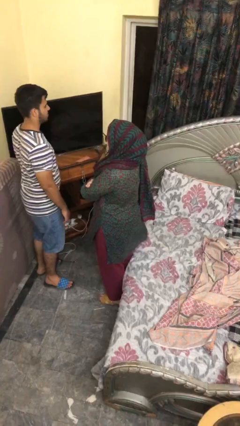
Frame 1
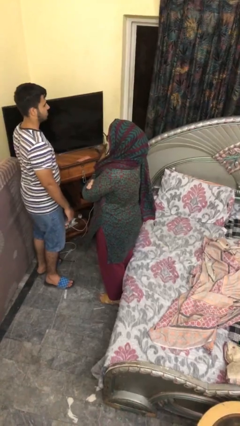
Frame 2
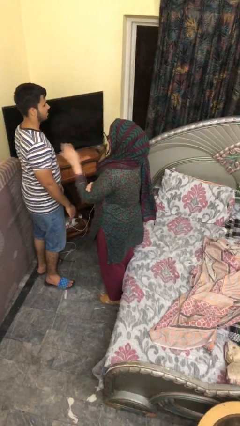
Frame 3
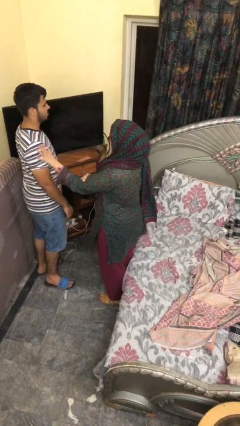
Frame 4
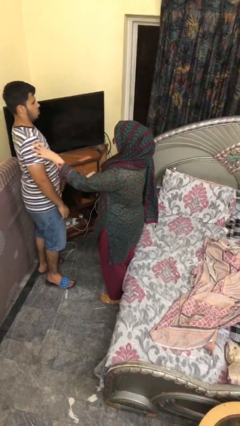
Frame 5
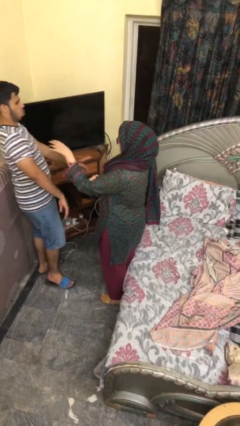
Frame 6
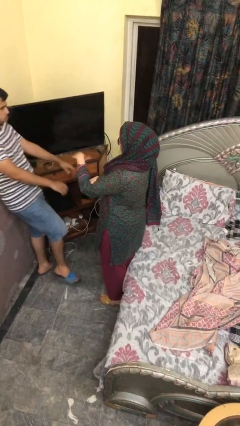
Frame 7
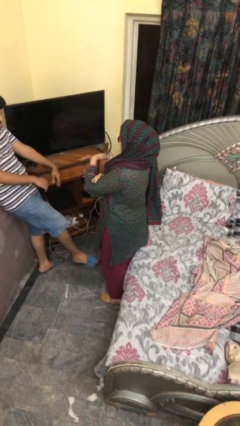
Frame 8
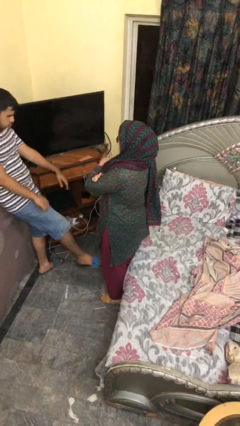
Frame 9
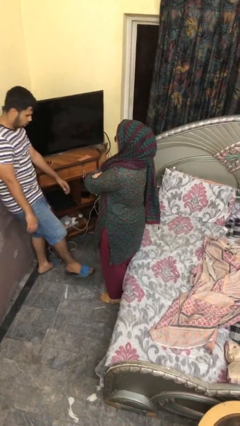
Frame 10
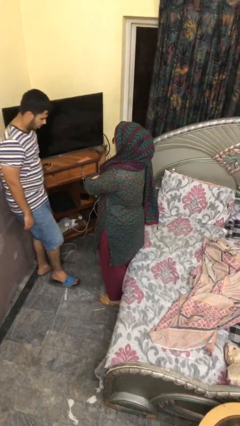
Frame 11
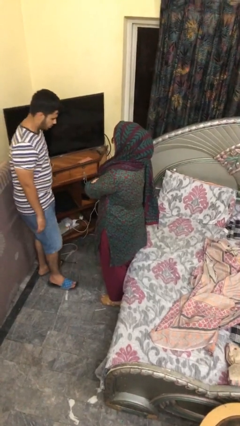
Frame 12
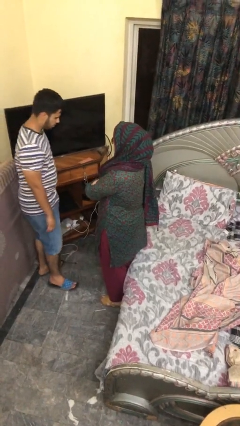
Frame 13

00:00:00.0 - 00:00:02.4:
person shoves person

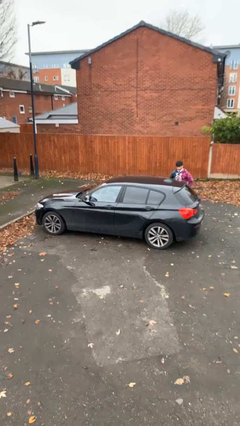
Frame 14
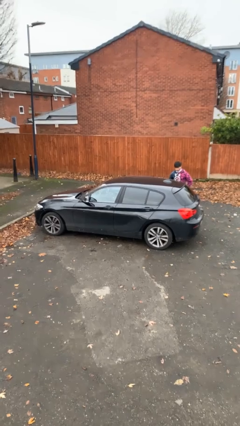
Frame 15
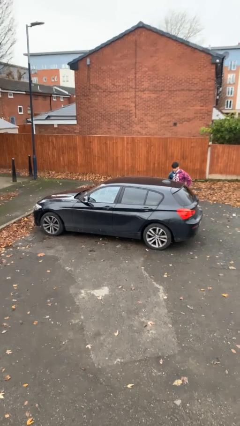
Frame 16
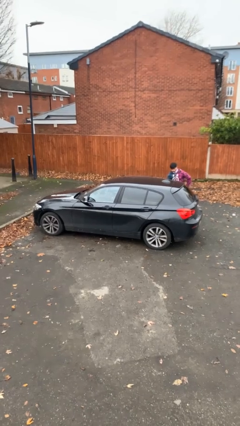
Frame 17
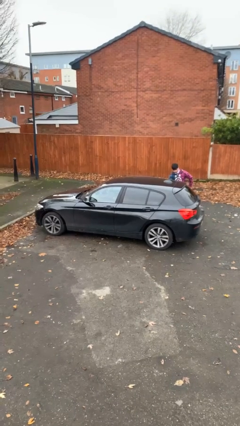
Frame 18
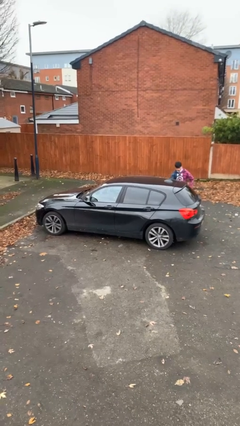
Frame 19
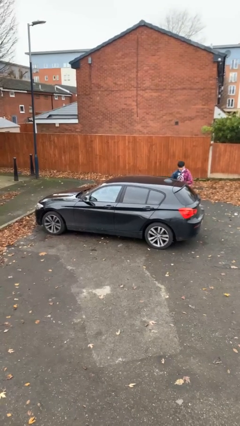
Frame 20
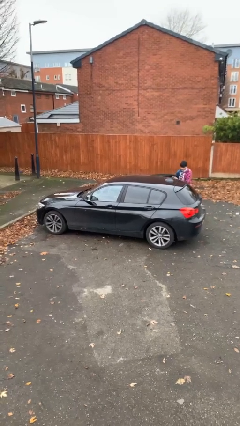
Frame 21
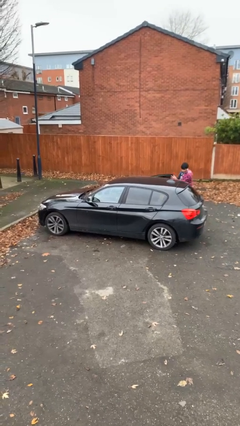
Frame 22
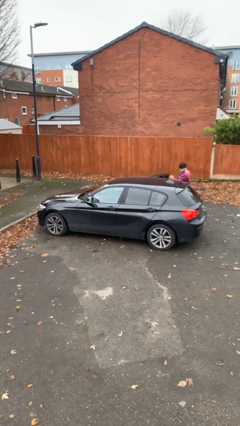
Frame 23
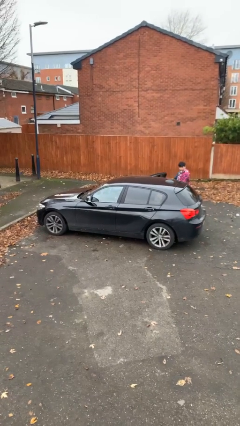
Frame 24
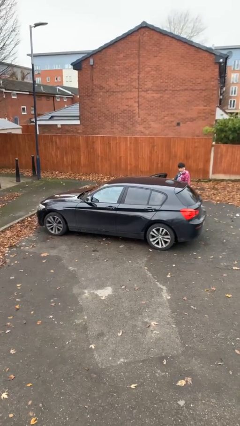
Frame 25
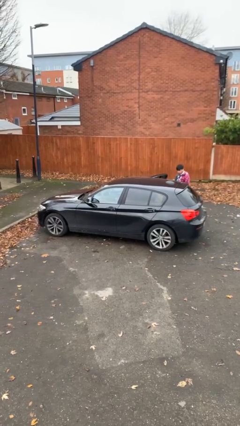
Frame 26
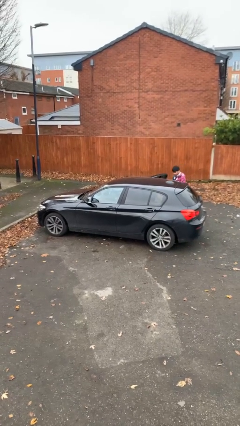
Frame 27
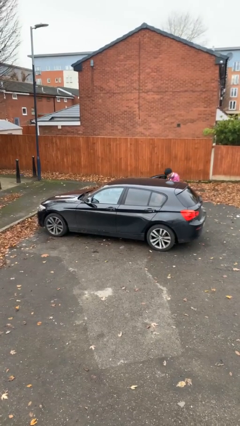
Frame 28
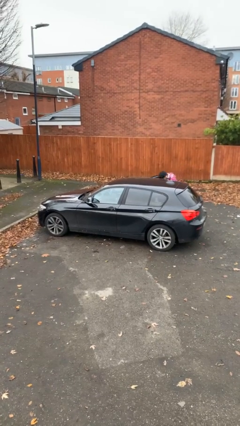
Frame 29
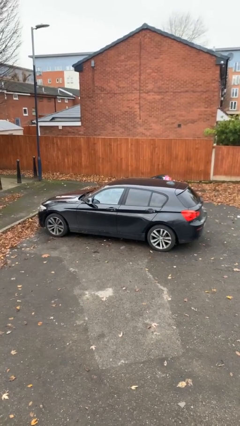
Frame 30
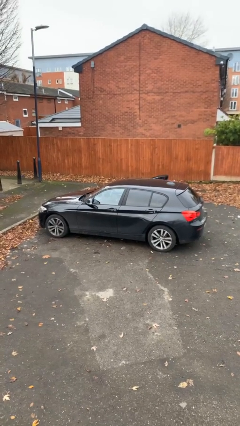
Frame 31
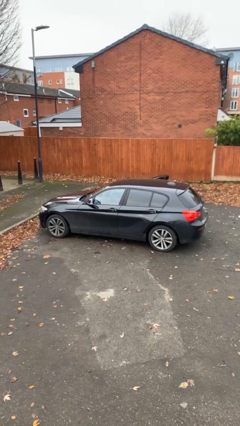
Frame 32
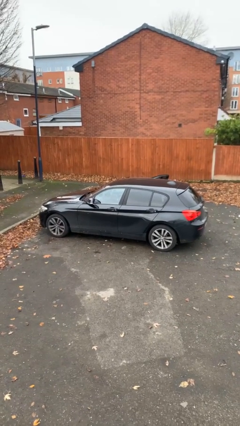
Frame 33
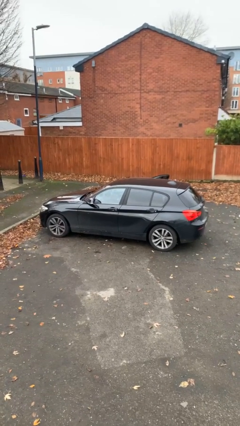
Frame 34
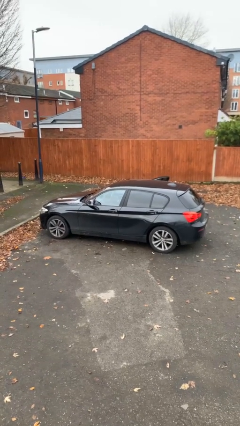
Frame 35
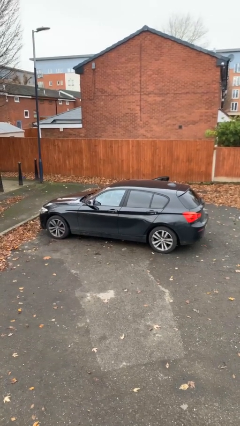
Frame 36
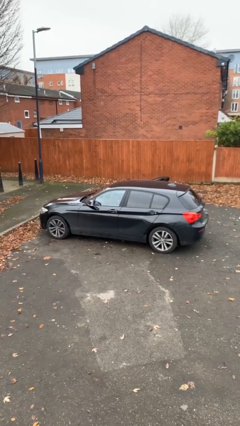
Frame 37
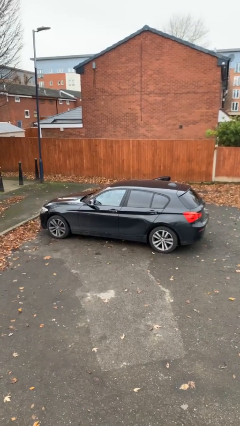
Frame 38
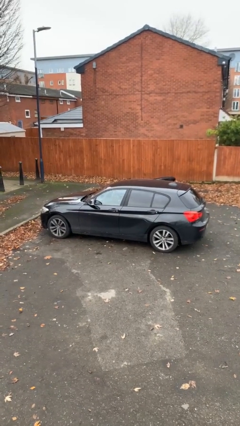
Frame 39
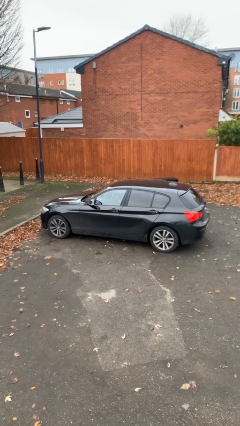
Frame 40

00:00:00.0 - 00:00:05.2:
car picks up person

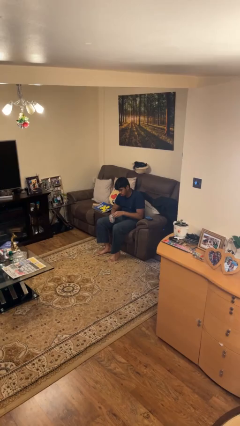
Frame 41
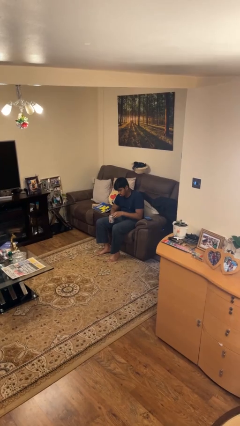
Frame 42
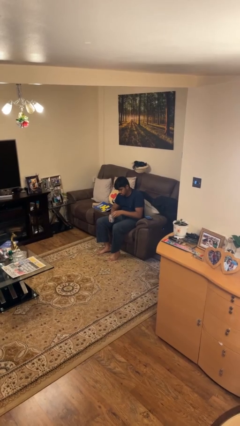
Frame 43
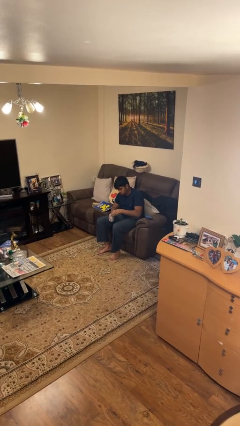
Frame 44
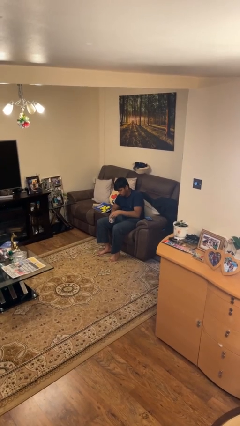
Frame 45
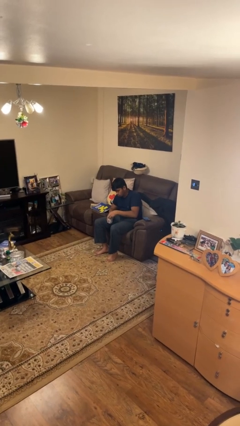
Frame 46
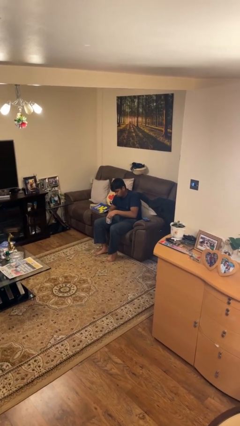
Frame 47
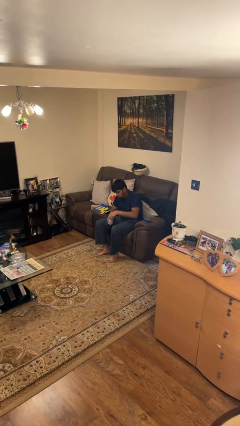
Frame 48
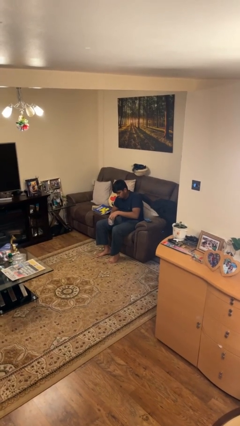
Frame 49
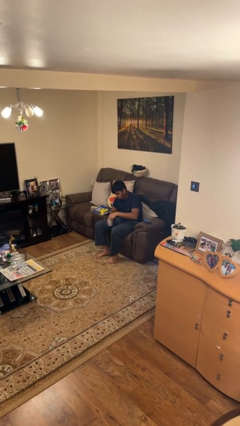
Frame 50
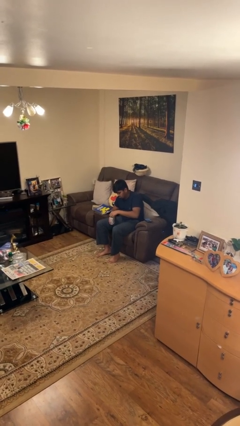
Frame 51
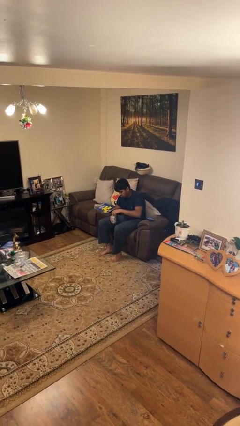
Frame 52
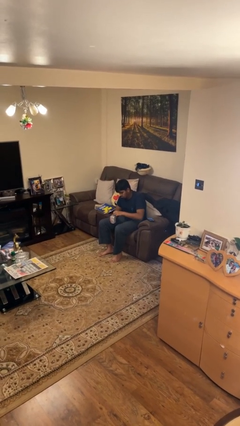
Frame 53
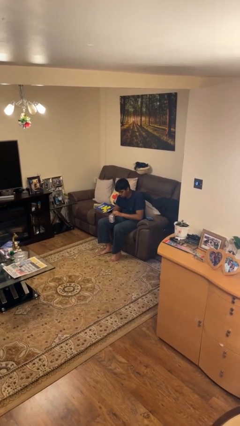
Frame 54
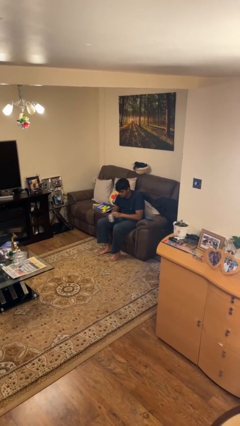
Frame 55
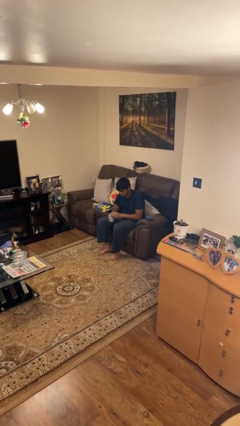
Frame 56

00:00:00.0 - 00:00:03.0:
person opens beverage can

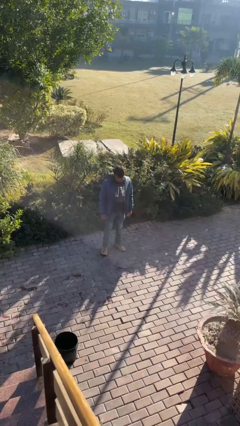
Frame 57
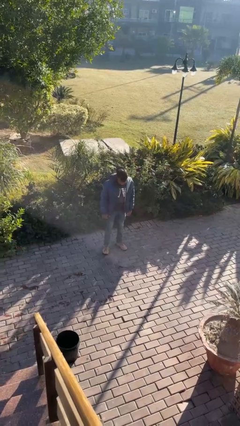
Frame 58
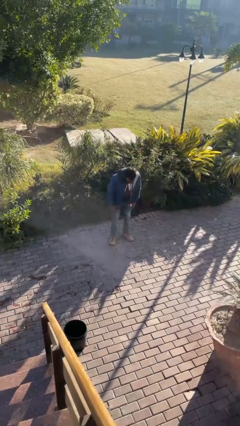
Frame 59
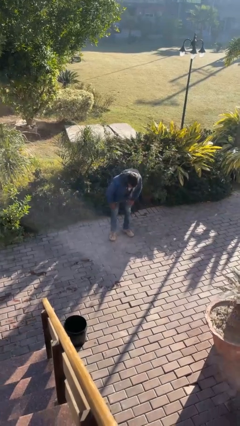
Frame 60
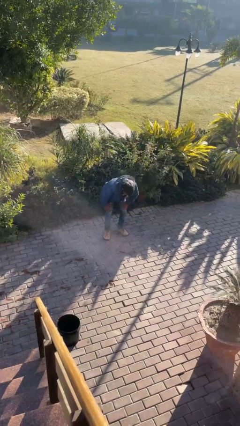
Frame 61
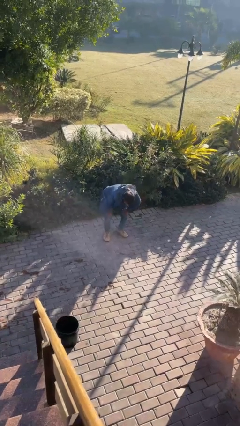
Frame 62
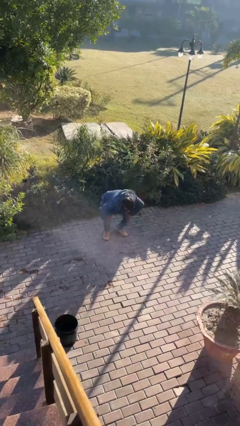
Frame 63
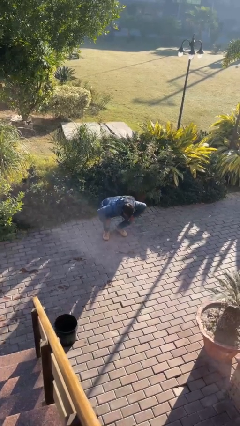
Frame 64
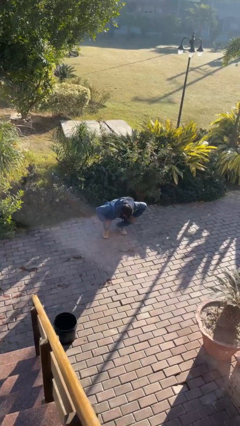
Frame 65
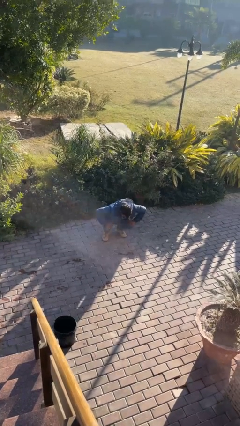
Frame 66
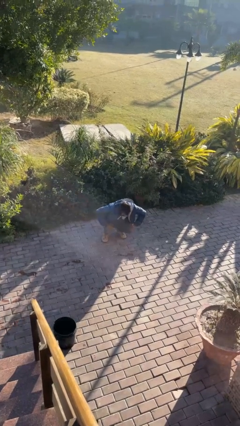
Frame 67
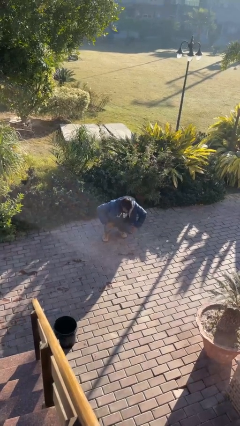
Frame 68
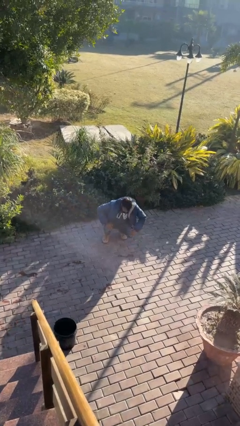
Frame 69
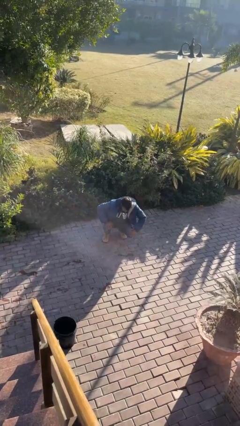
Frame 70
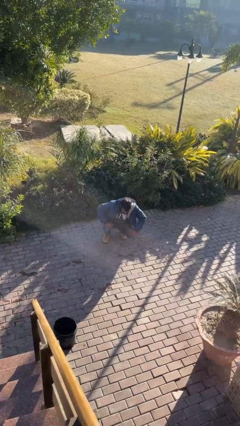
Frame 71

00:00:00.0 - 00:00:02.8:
person sits down

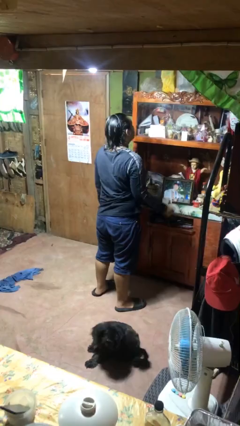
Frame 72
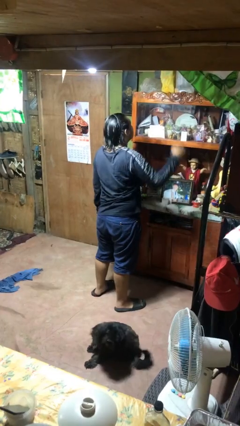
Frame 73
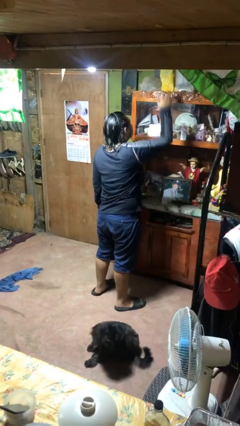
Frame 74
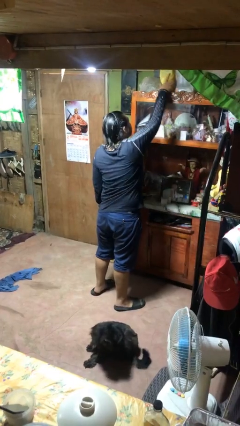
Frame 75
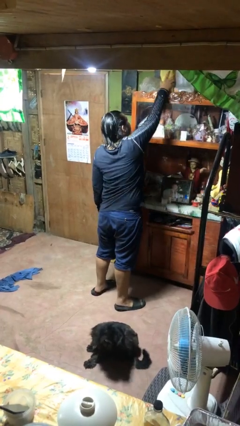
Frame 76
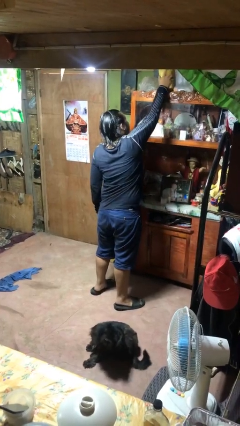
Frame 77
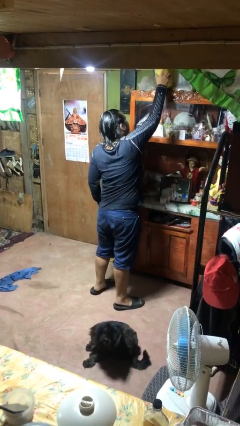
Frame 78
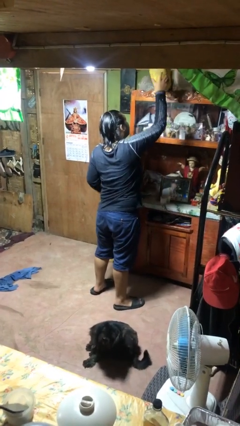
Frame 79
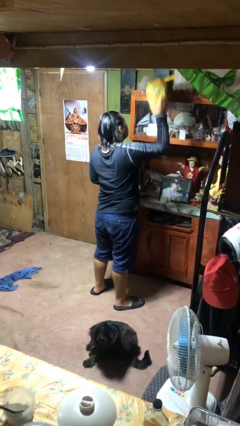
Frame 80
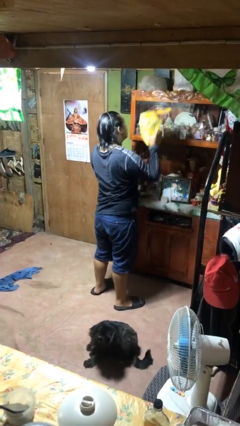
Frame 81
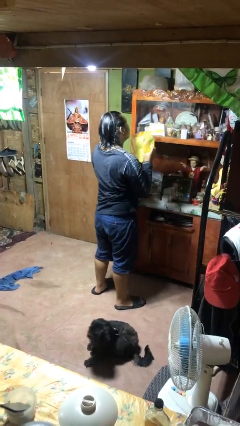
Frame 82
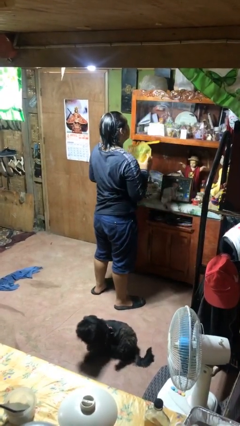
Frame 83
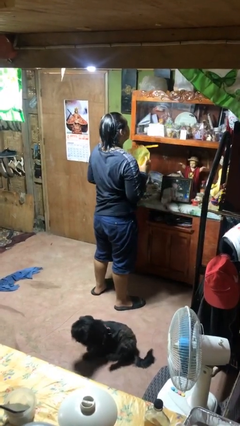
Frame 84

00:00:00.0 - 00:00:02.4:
person picks up object from shelf

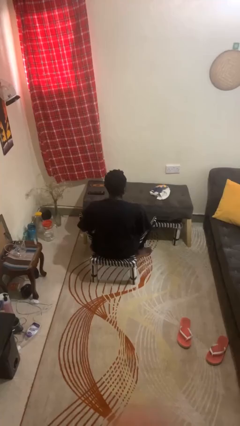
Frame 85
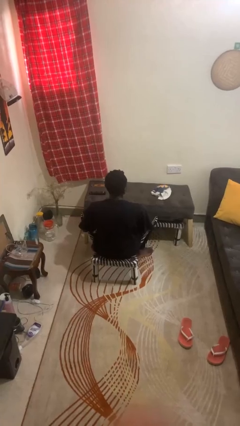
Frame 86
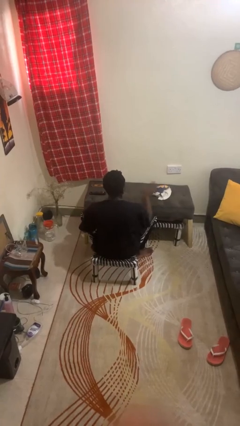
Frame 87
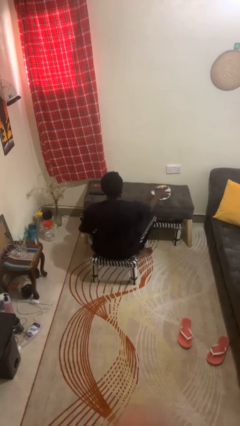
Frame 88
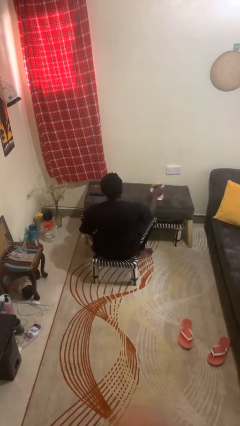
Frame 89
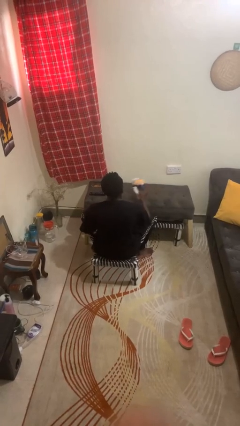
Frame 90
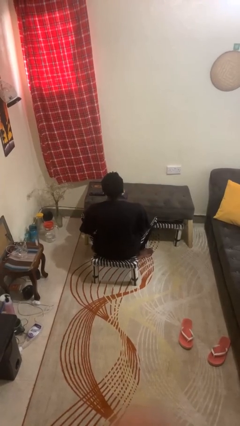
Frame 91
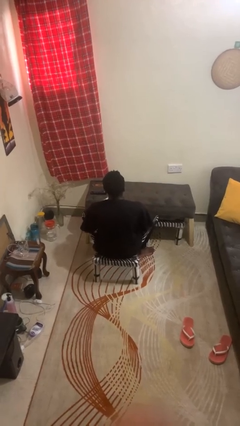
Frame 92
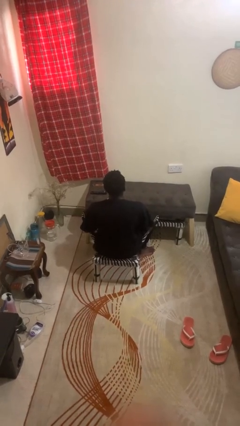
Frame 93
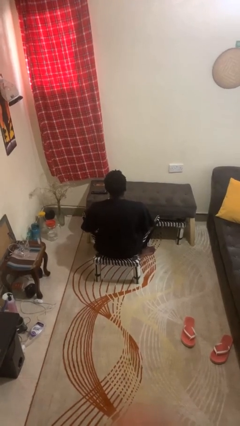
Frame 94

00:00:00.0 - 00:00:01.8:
person picks up object from table
